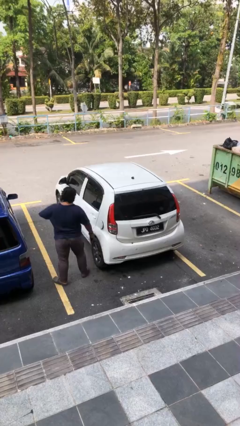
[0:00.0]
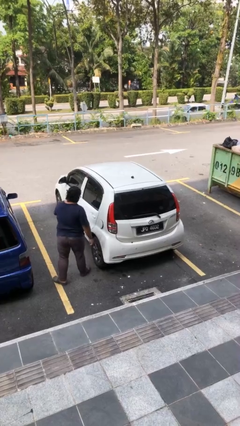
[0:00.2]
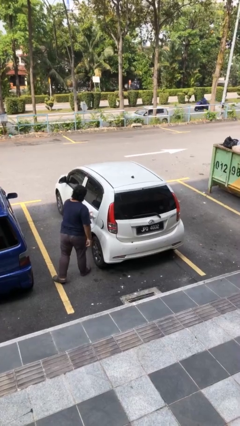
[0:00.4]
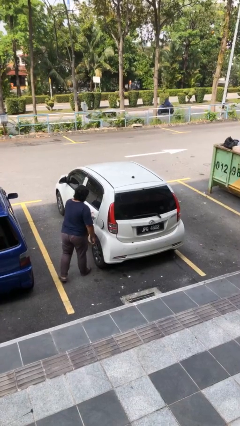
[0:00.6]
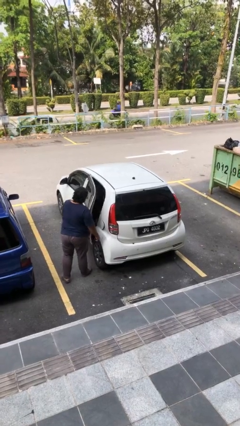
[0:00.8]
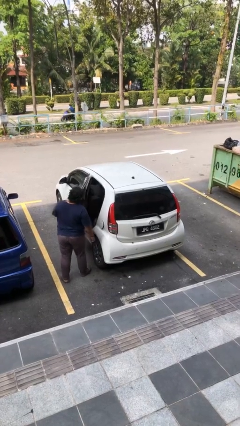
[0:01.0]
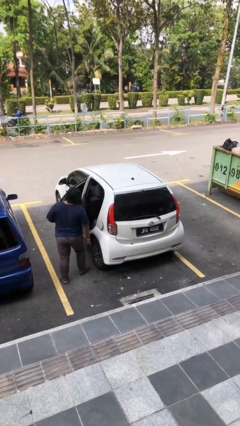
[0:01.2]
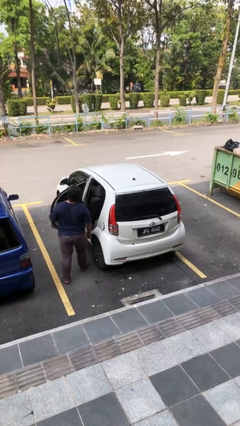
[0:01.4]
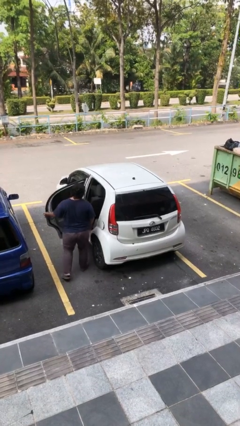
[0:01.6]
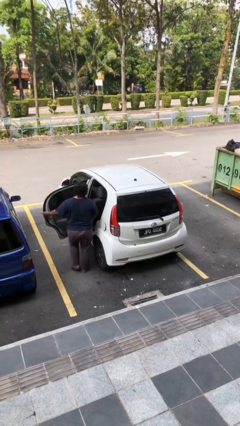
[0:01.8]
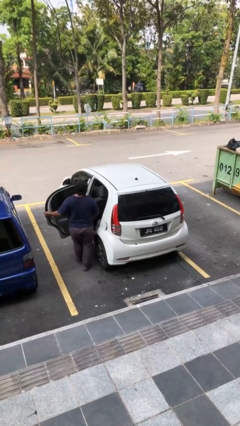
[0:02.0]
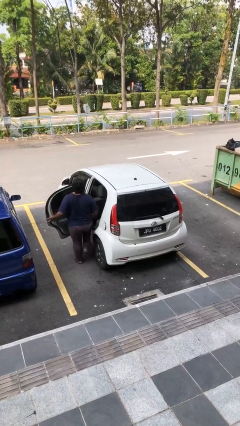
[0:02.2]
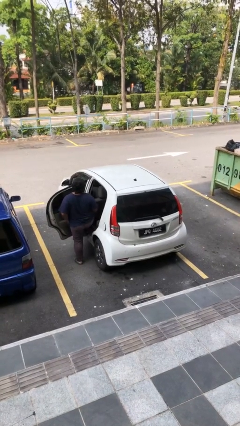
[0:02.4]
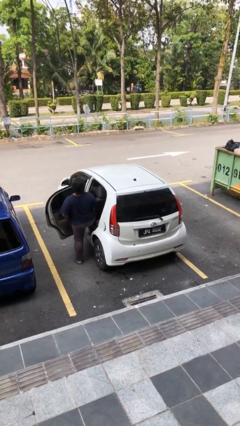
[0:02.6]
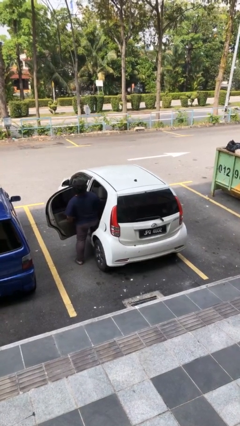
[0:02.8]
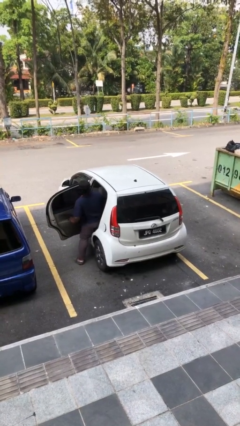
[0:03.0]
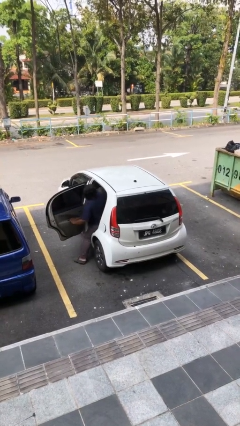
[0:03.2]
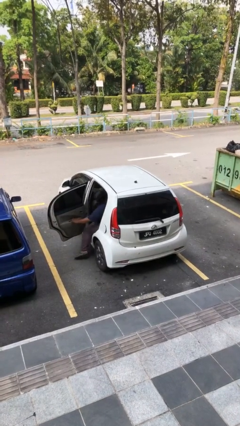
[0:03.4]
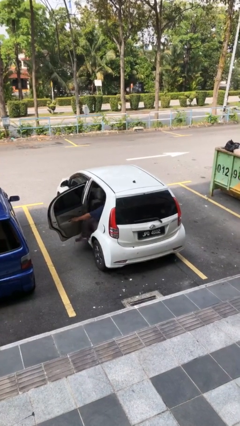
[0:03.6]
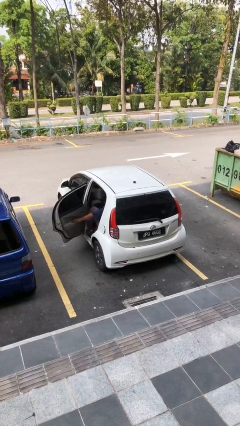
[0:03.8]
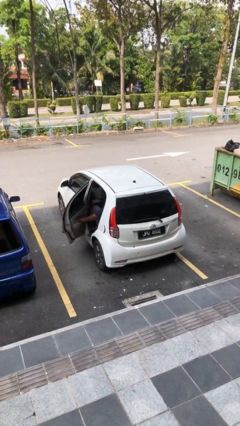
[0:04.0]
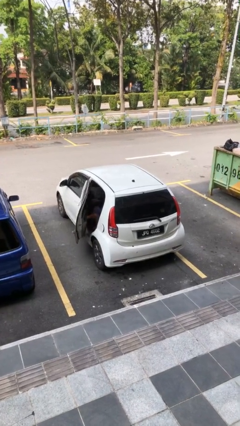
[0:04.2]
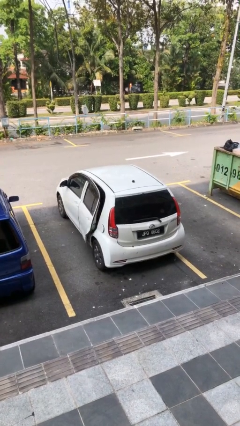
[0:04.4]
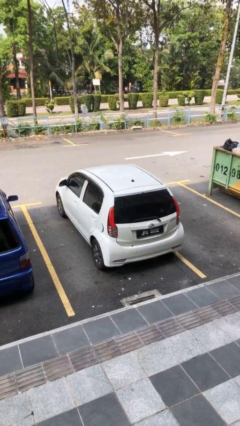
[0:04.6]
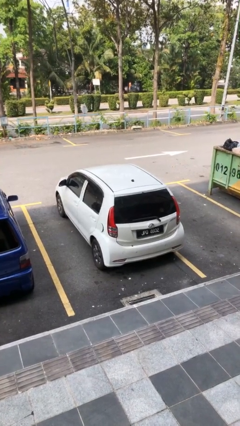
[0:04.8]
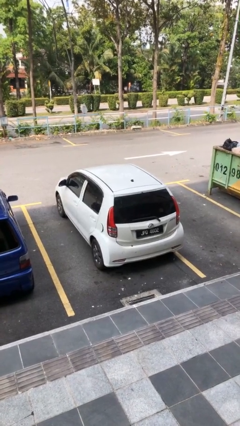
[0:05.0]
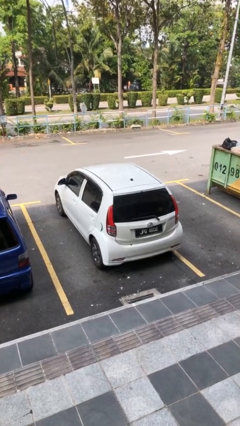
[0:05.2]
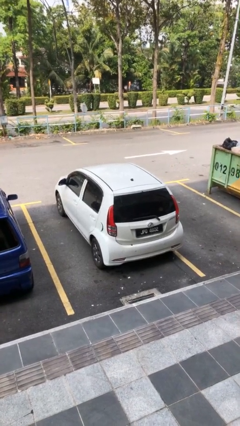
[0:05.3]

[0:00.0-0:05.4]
car picks up person

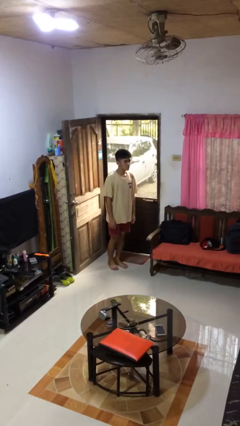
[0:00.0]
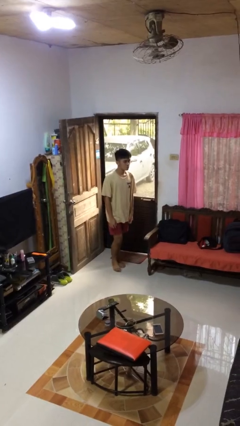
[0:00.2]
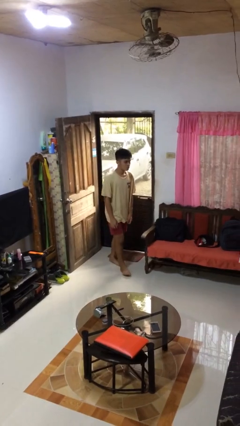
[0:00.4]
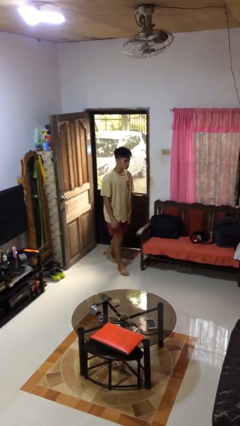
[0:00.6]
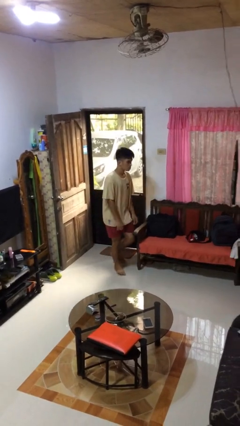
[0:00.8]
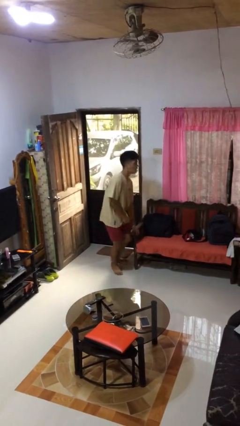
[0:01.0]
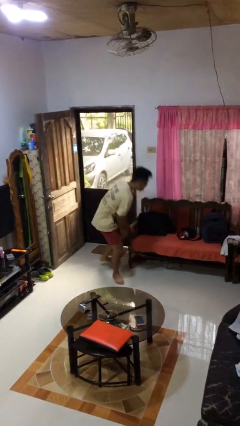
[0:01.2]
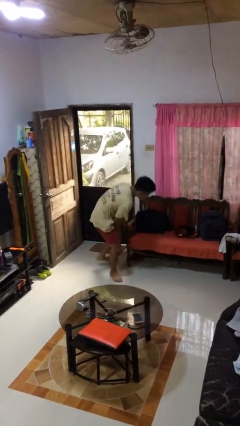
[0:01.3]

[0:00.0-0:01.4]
person trips on object on floor

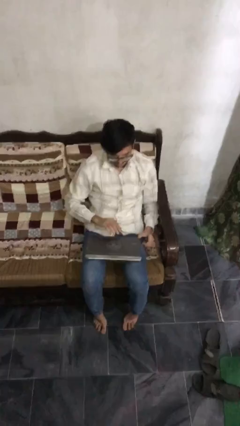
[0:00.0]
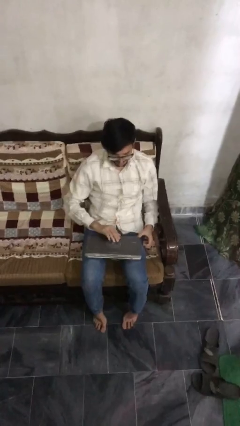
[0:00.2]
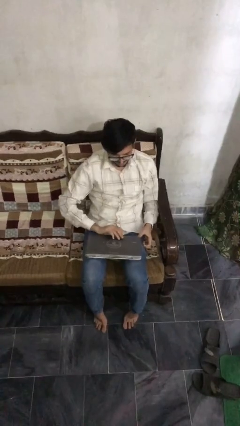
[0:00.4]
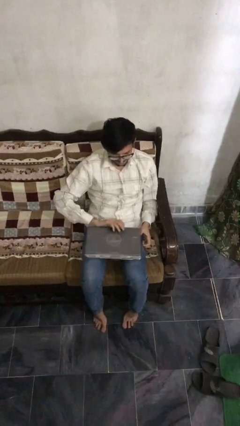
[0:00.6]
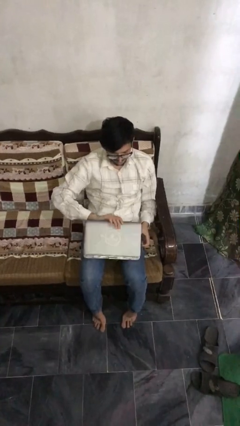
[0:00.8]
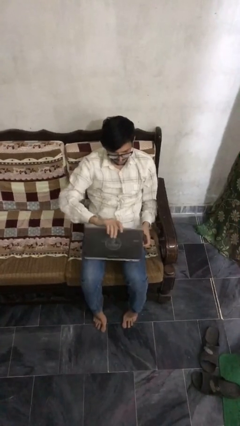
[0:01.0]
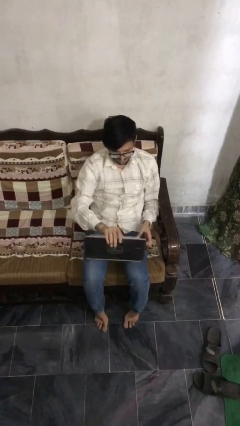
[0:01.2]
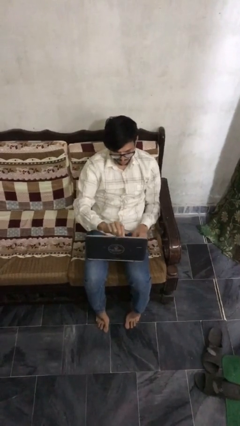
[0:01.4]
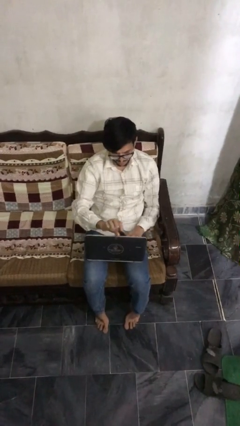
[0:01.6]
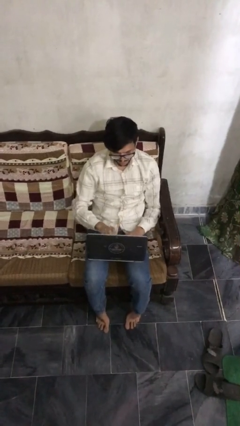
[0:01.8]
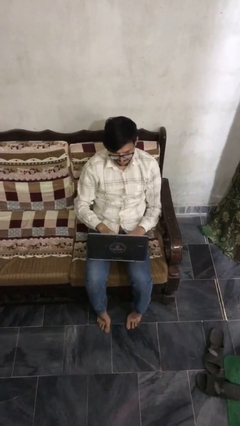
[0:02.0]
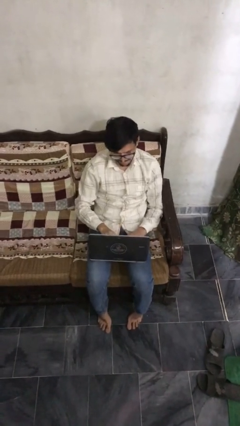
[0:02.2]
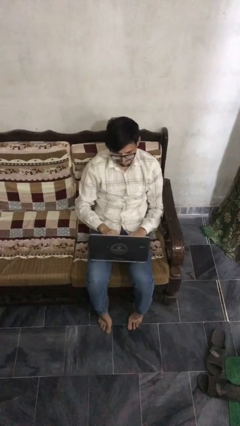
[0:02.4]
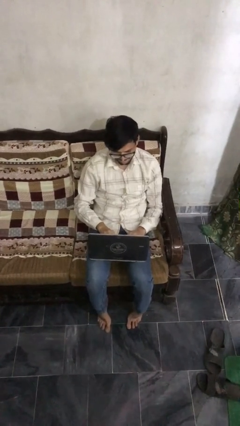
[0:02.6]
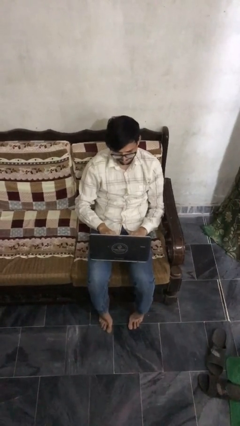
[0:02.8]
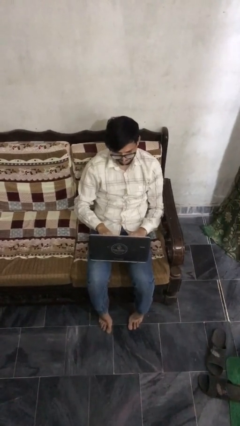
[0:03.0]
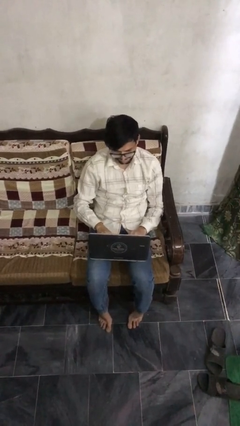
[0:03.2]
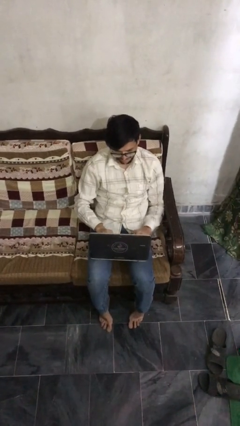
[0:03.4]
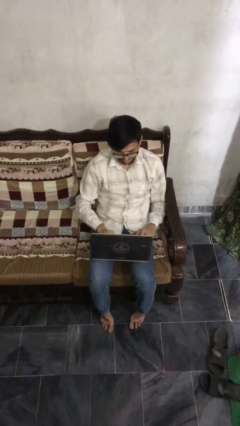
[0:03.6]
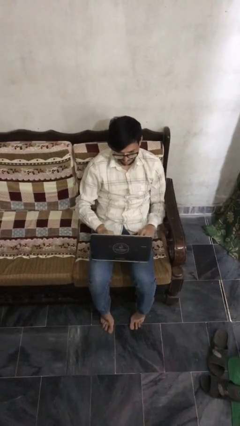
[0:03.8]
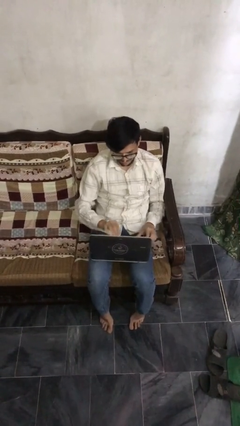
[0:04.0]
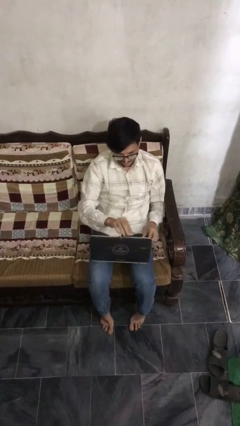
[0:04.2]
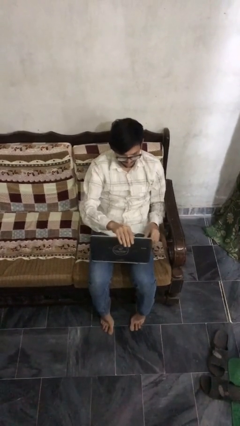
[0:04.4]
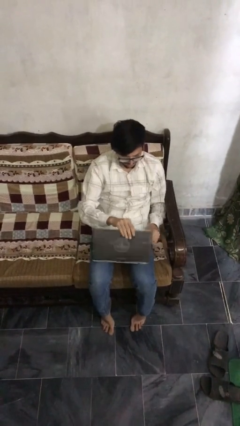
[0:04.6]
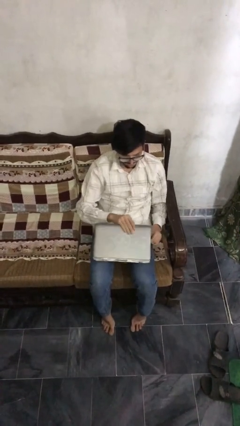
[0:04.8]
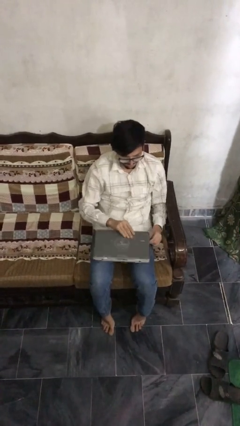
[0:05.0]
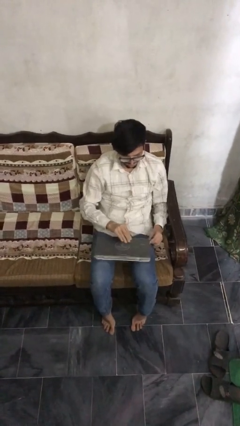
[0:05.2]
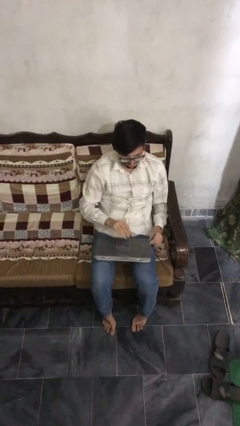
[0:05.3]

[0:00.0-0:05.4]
person interacts with laptop

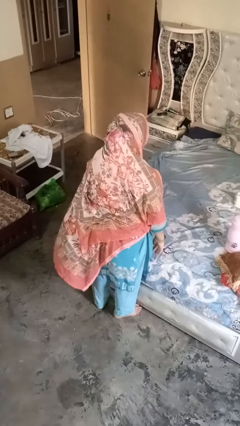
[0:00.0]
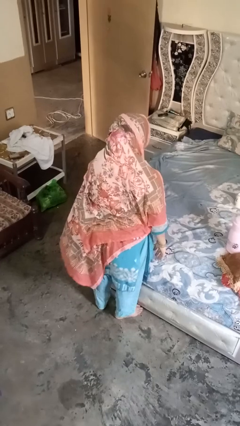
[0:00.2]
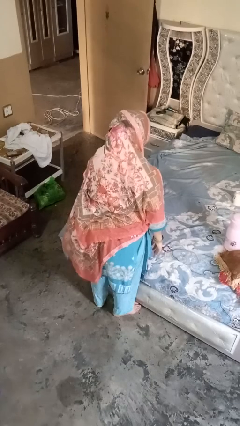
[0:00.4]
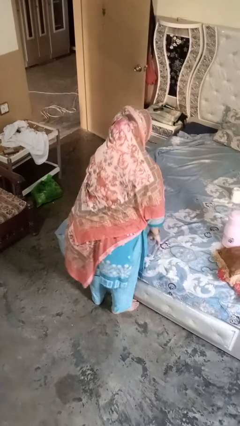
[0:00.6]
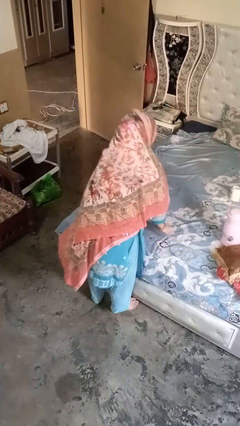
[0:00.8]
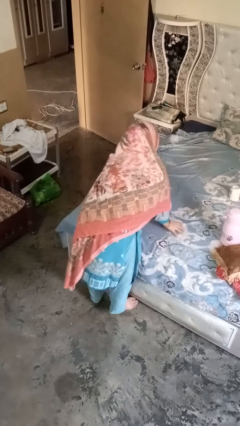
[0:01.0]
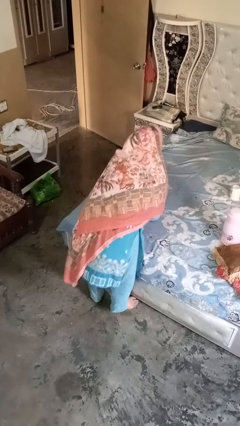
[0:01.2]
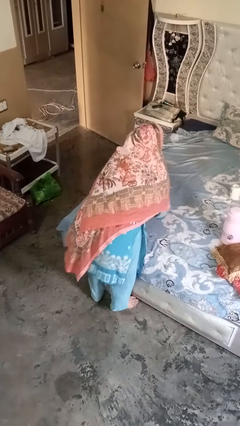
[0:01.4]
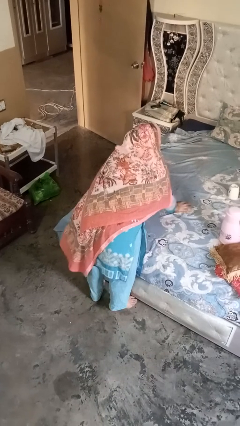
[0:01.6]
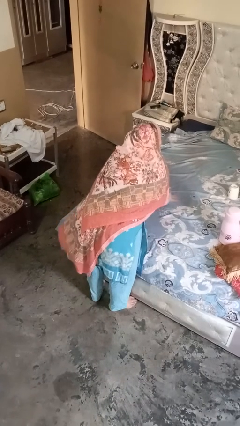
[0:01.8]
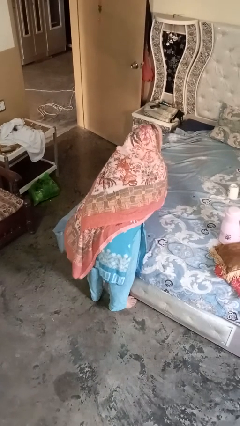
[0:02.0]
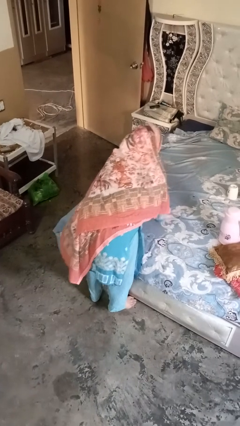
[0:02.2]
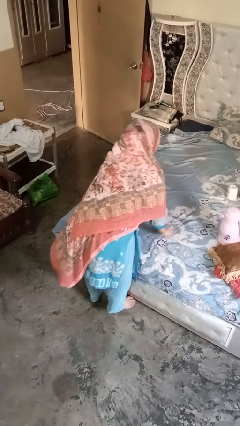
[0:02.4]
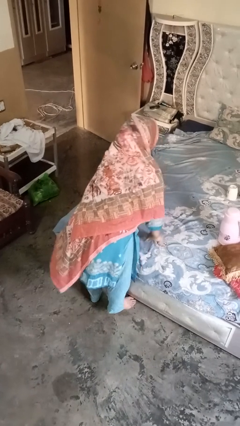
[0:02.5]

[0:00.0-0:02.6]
person searches under bed

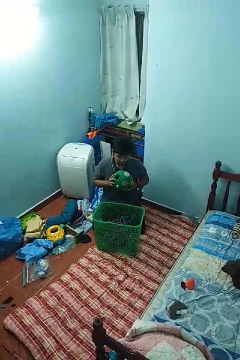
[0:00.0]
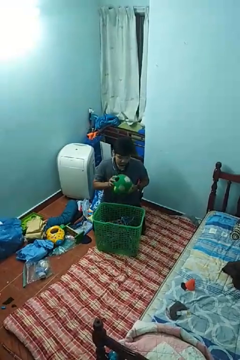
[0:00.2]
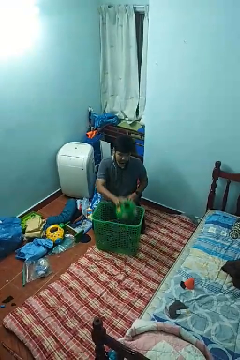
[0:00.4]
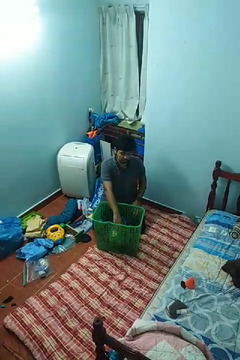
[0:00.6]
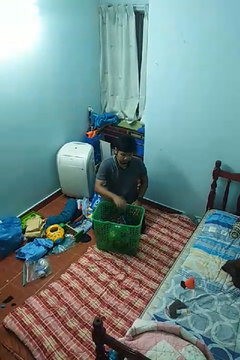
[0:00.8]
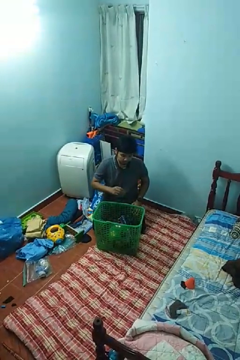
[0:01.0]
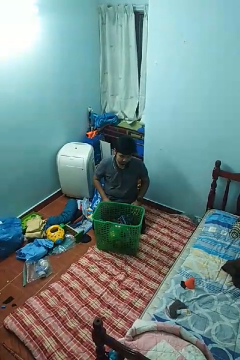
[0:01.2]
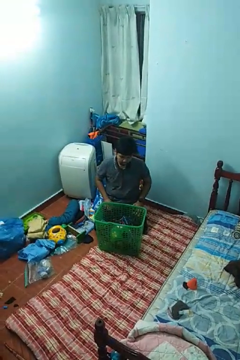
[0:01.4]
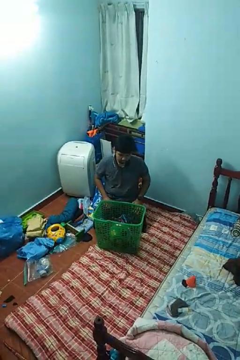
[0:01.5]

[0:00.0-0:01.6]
person puts object into basket

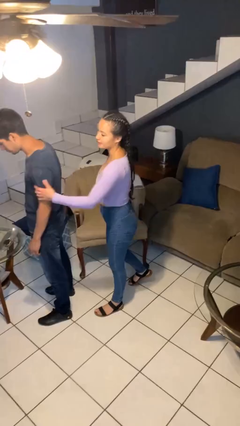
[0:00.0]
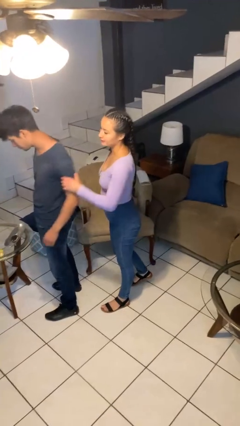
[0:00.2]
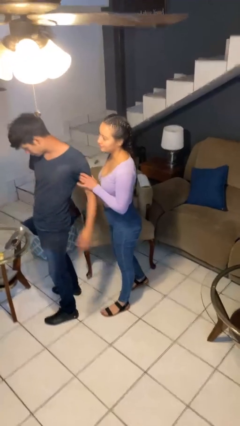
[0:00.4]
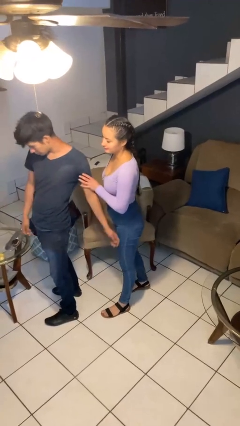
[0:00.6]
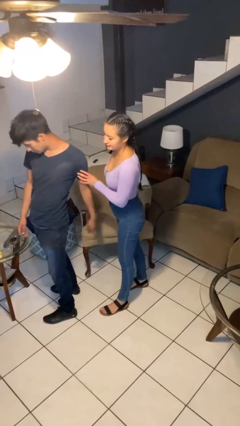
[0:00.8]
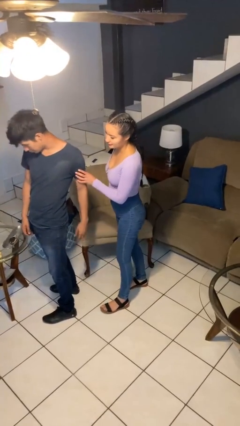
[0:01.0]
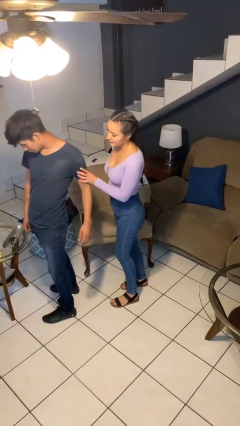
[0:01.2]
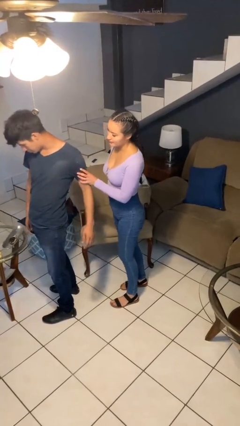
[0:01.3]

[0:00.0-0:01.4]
person grabs person by bicep
